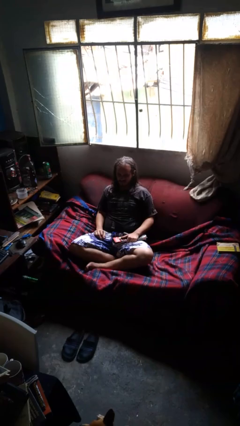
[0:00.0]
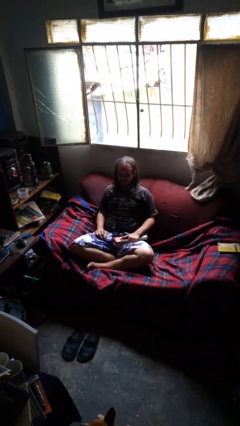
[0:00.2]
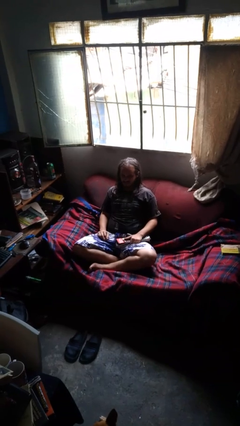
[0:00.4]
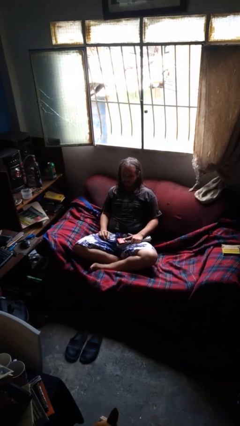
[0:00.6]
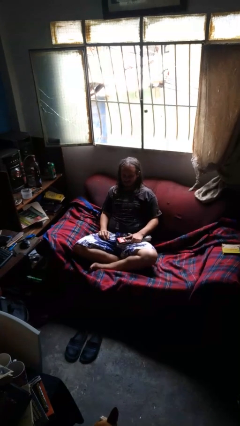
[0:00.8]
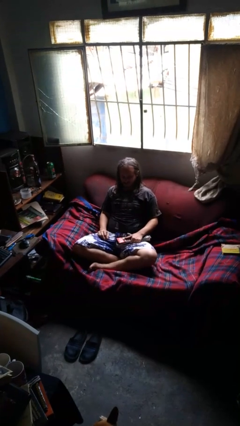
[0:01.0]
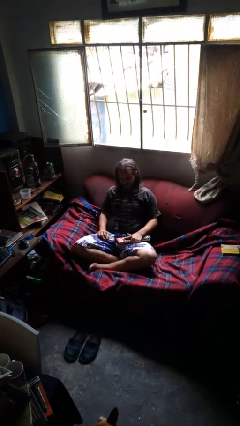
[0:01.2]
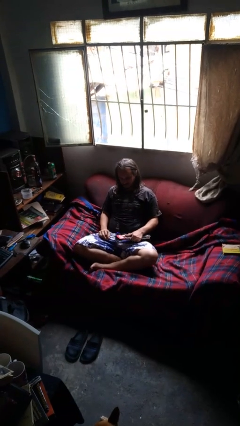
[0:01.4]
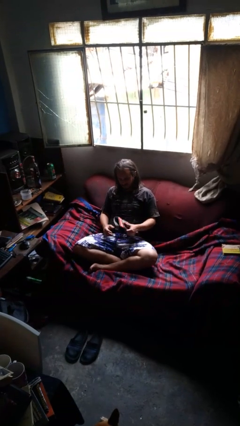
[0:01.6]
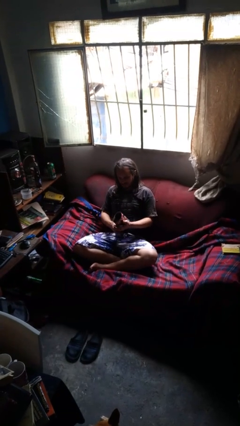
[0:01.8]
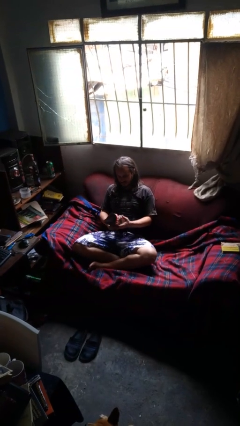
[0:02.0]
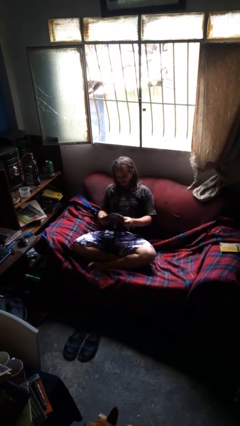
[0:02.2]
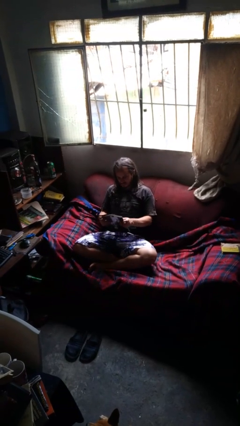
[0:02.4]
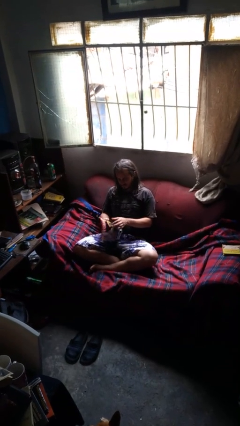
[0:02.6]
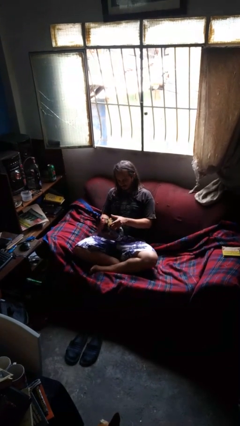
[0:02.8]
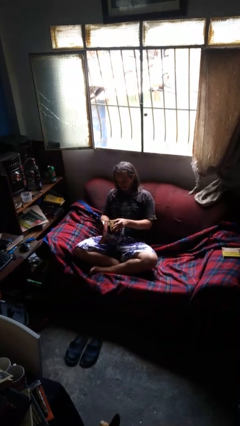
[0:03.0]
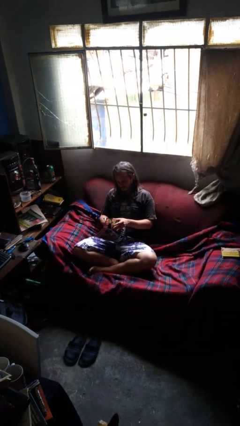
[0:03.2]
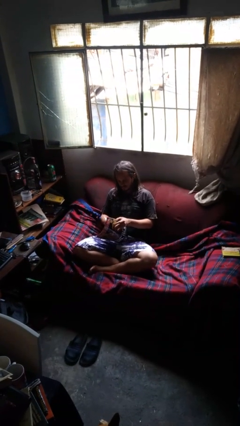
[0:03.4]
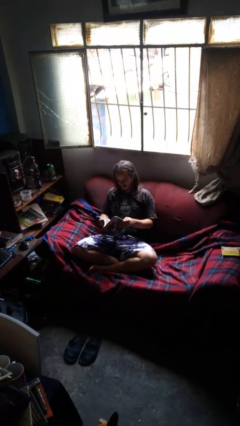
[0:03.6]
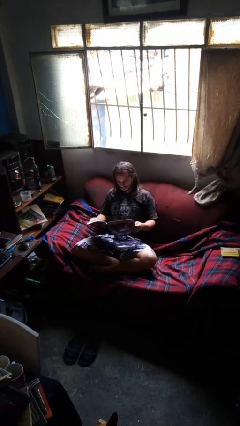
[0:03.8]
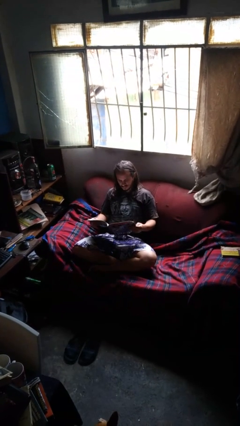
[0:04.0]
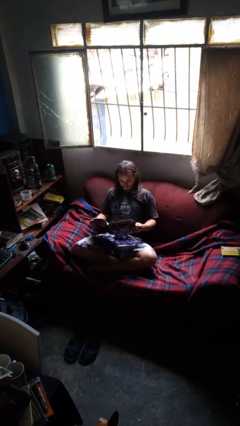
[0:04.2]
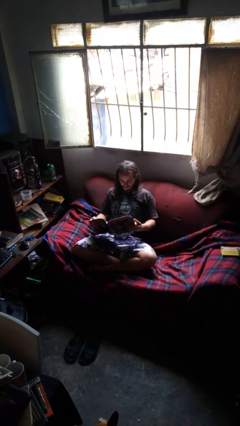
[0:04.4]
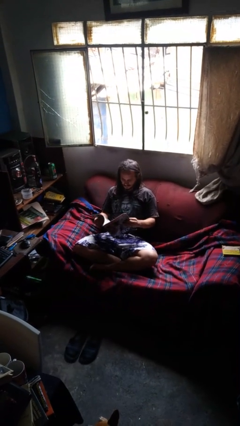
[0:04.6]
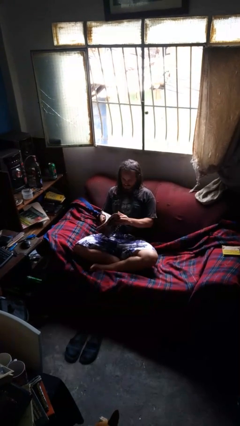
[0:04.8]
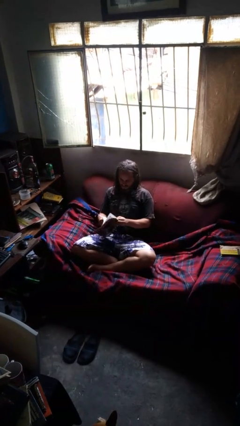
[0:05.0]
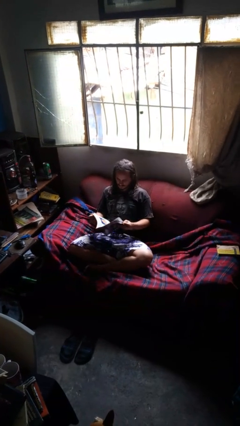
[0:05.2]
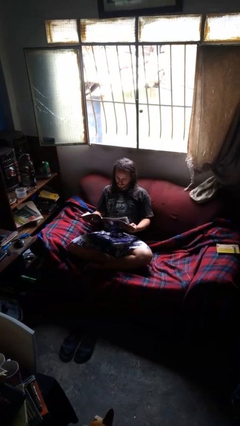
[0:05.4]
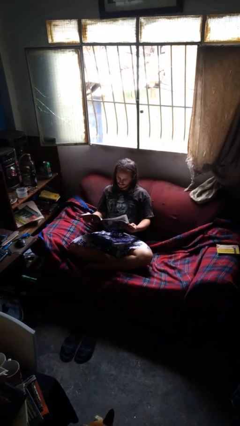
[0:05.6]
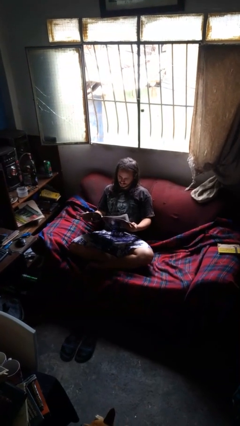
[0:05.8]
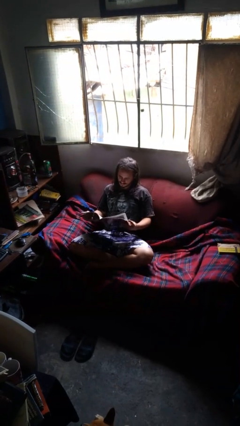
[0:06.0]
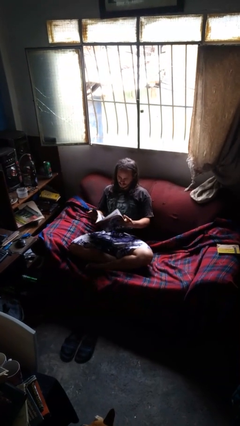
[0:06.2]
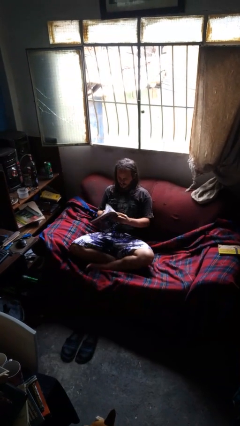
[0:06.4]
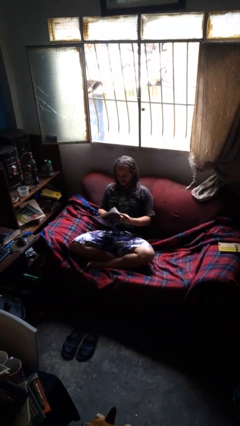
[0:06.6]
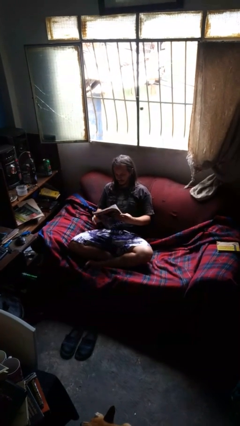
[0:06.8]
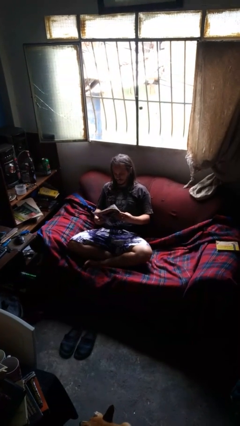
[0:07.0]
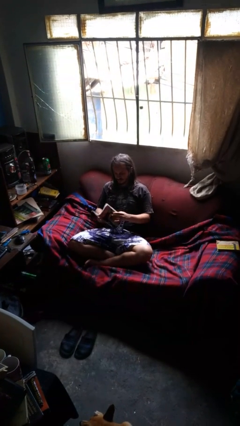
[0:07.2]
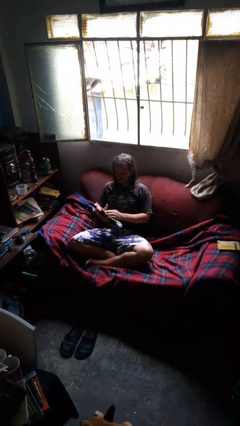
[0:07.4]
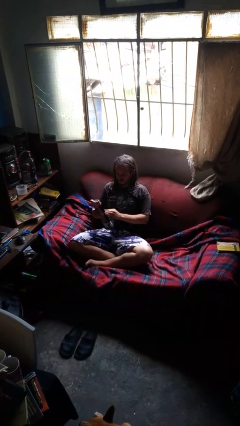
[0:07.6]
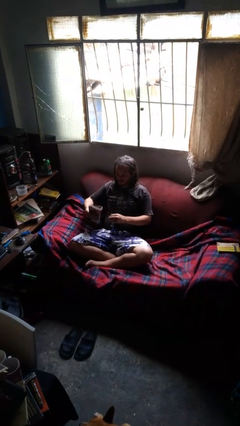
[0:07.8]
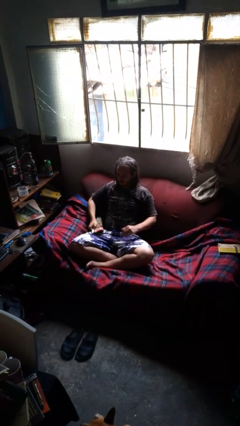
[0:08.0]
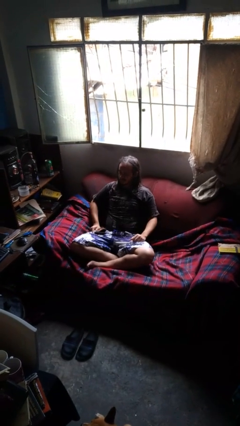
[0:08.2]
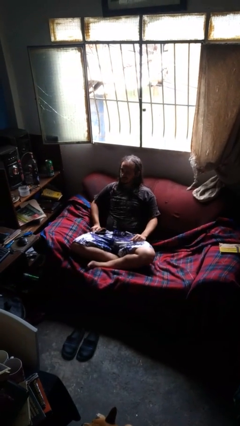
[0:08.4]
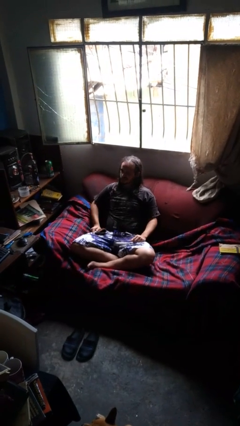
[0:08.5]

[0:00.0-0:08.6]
person reads magazine

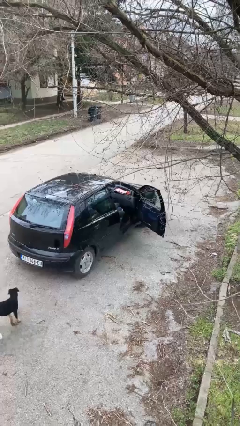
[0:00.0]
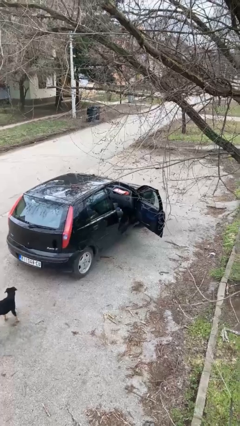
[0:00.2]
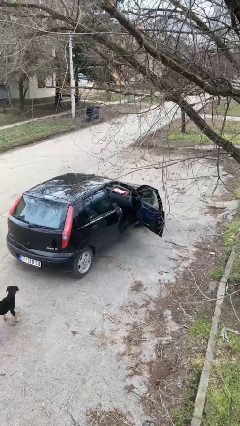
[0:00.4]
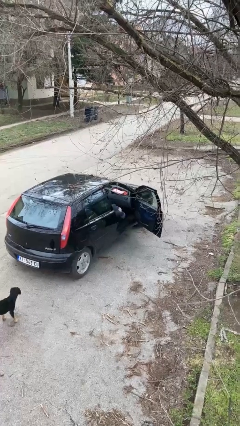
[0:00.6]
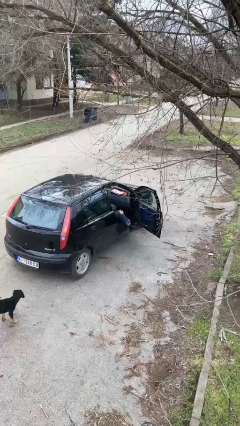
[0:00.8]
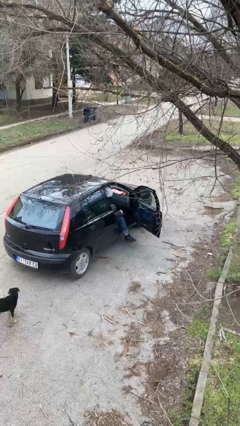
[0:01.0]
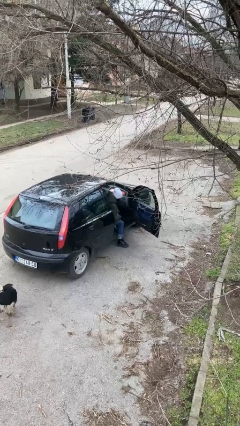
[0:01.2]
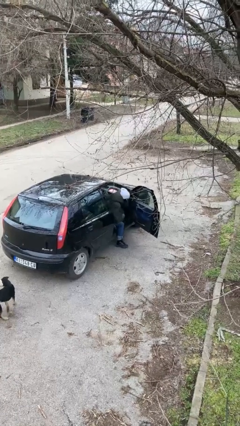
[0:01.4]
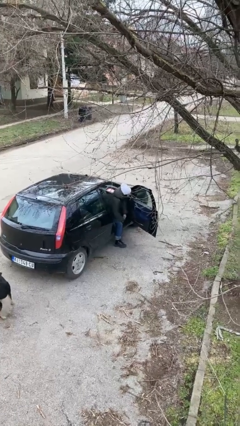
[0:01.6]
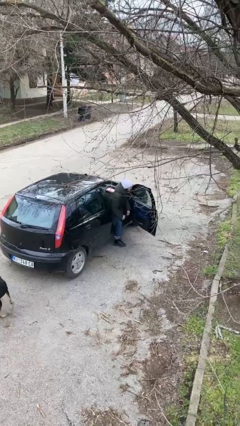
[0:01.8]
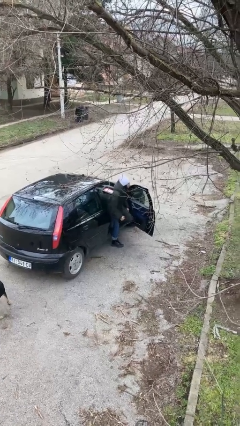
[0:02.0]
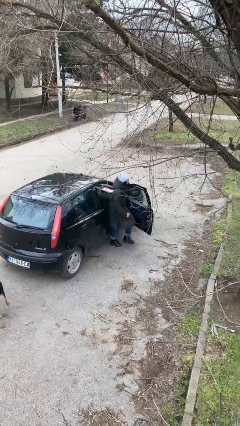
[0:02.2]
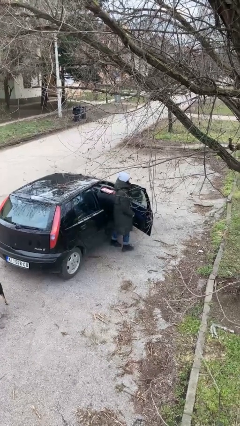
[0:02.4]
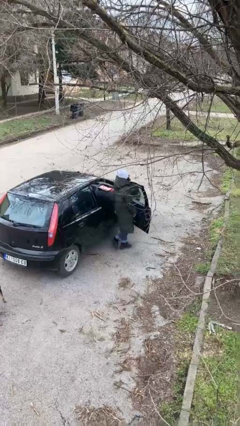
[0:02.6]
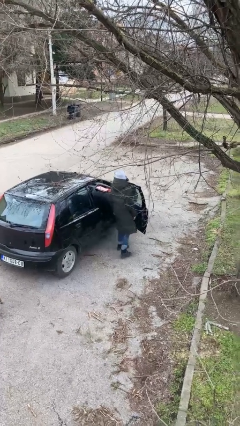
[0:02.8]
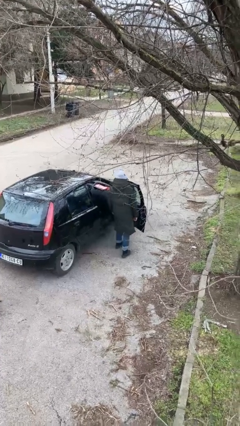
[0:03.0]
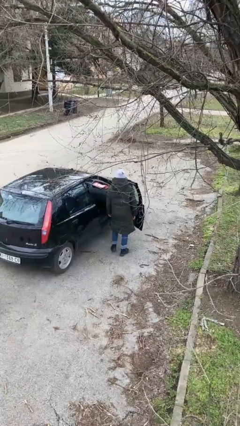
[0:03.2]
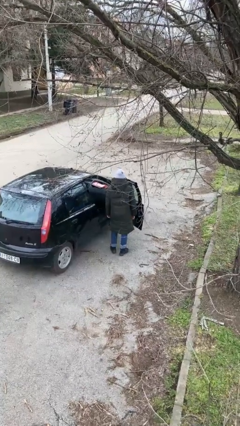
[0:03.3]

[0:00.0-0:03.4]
person exits car

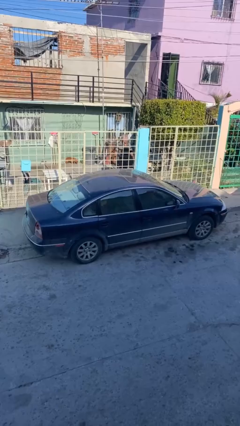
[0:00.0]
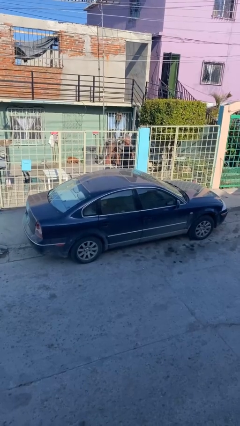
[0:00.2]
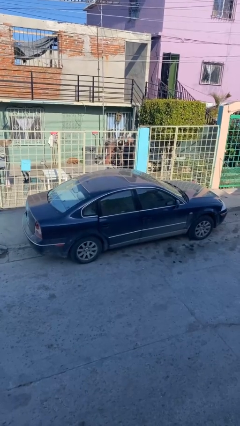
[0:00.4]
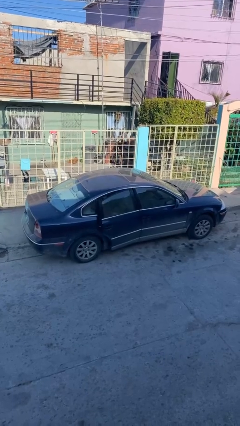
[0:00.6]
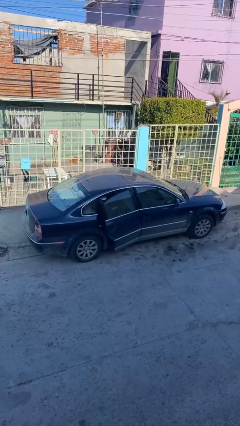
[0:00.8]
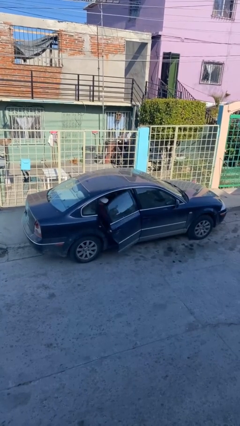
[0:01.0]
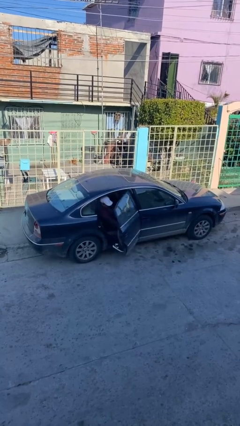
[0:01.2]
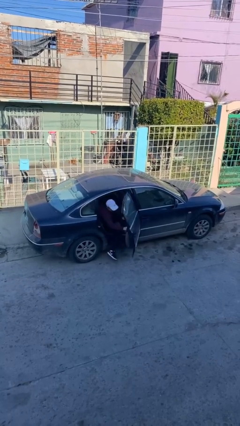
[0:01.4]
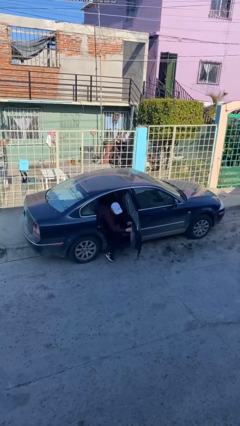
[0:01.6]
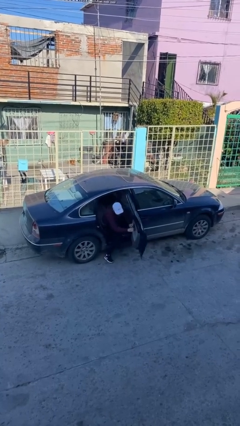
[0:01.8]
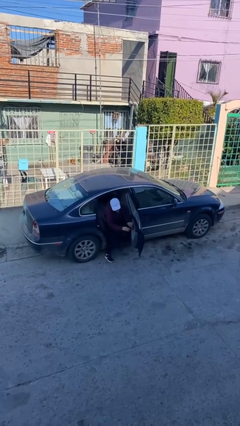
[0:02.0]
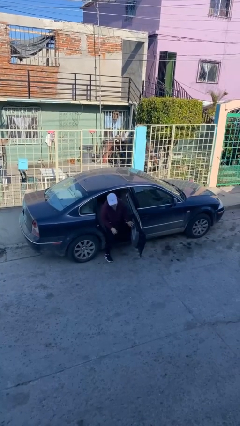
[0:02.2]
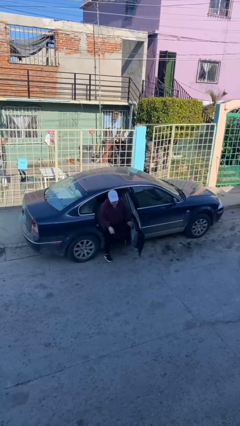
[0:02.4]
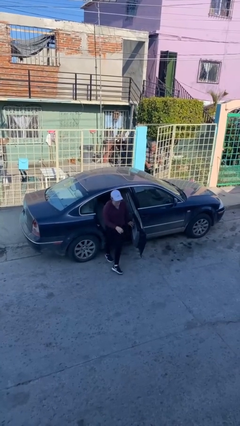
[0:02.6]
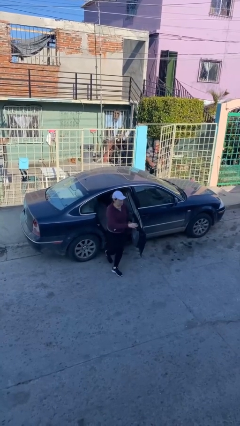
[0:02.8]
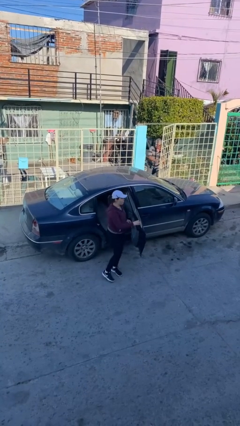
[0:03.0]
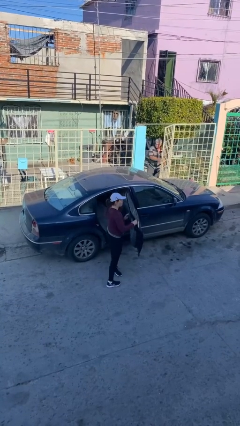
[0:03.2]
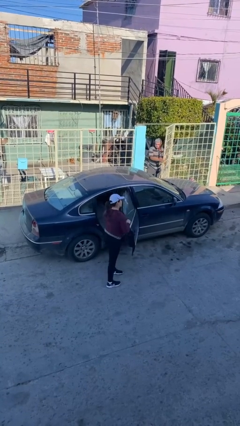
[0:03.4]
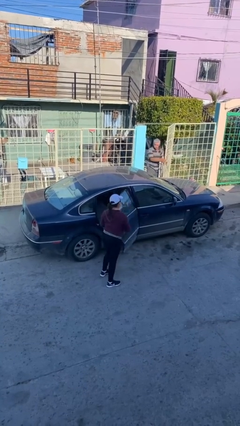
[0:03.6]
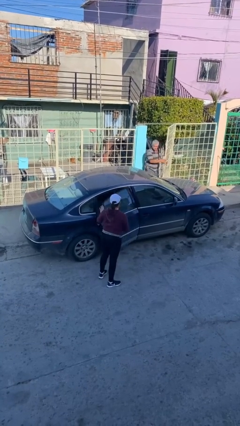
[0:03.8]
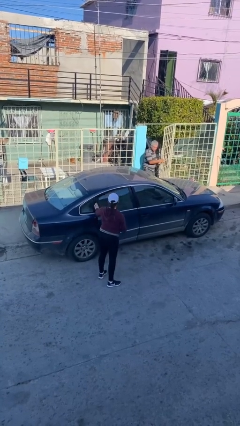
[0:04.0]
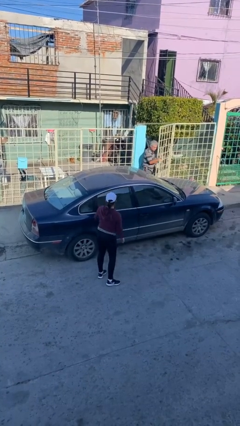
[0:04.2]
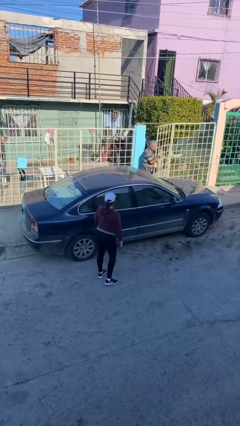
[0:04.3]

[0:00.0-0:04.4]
car drops off person

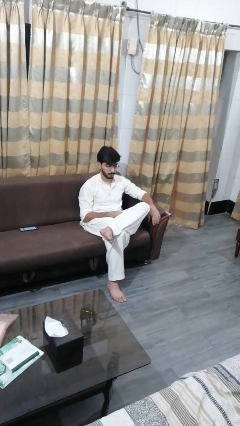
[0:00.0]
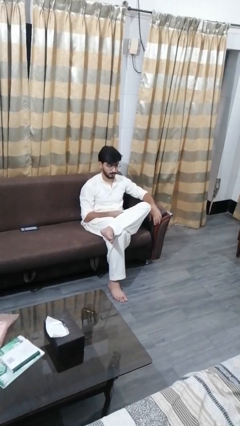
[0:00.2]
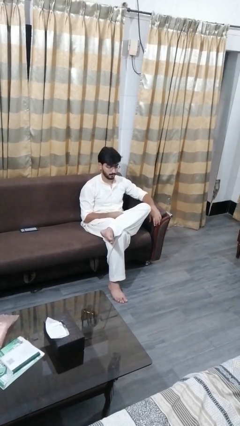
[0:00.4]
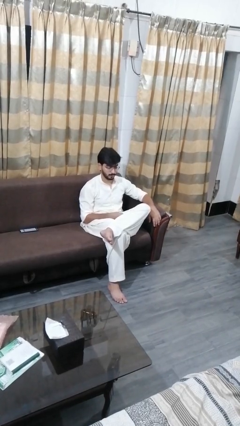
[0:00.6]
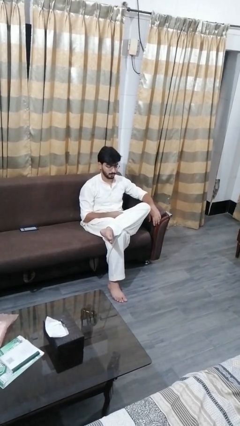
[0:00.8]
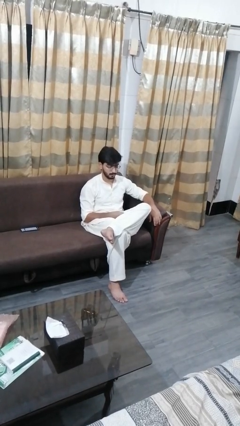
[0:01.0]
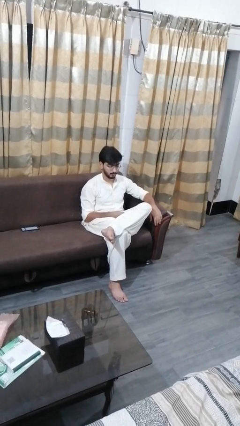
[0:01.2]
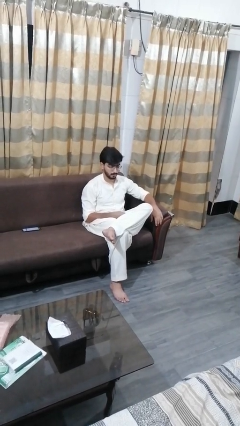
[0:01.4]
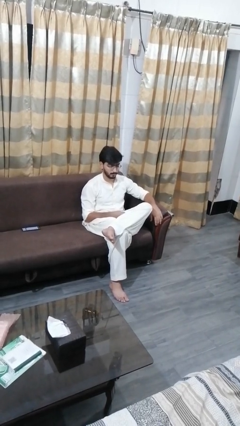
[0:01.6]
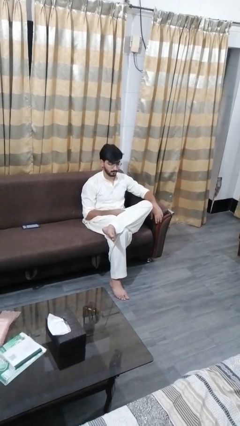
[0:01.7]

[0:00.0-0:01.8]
person crosses legs
